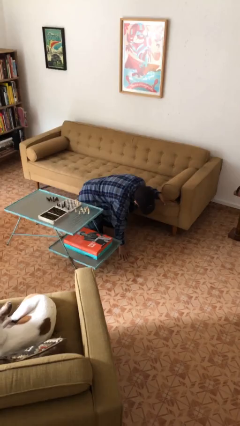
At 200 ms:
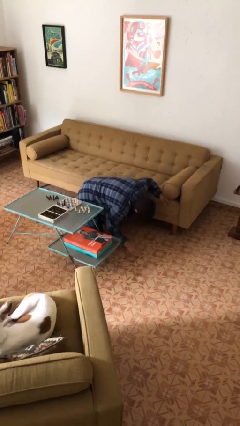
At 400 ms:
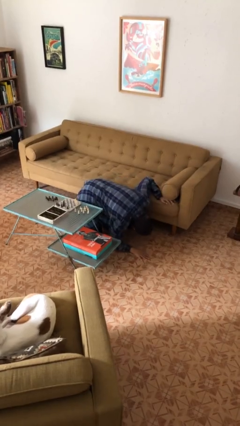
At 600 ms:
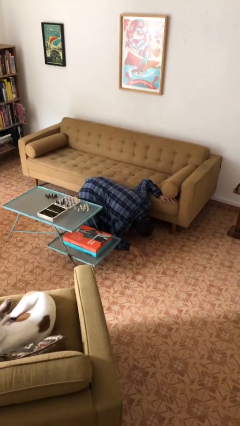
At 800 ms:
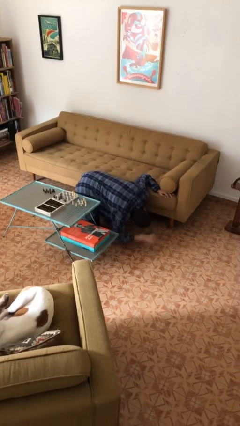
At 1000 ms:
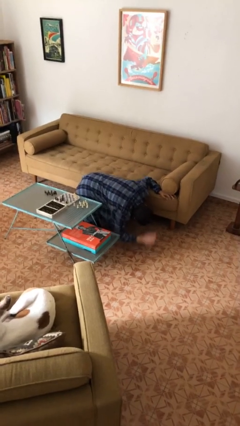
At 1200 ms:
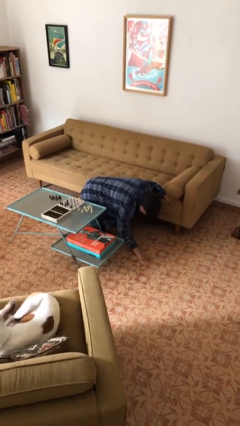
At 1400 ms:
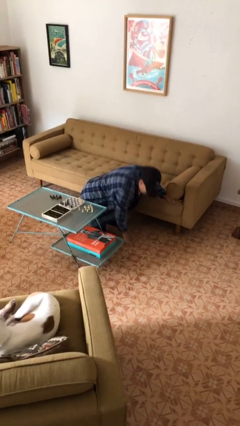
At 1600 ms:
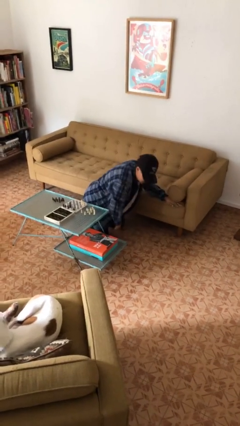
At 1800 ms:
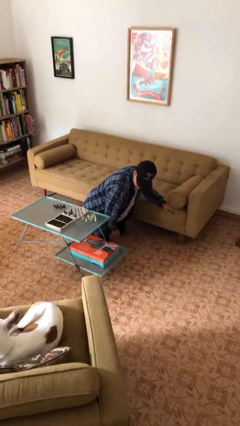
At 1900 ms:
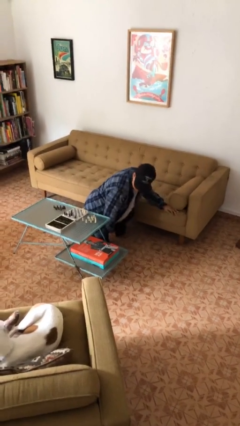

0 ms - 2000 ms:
person searches under couch

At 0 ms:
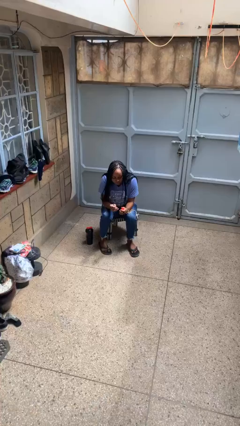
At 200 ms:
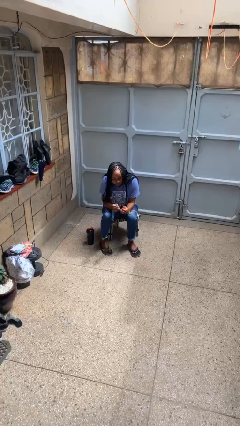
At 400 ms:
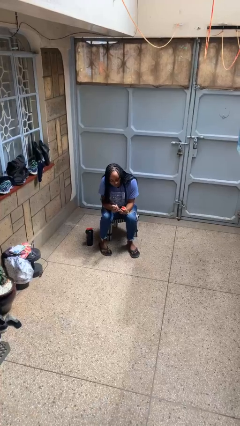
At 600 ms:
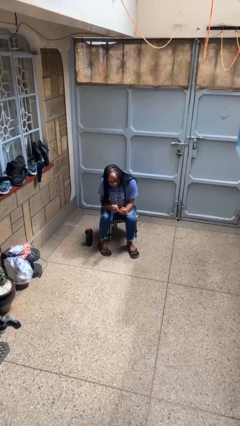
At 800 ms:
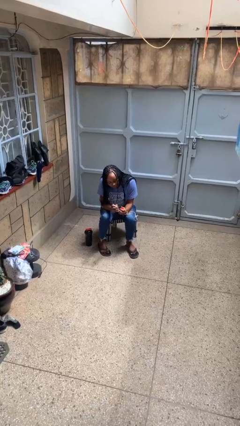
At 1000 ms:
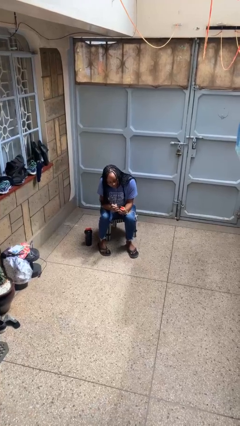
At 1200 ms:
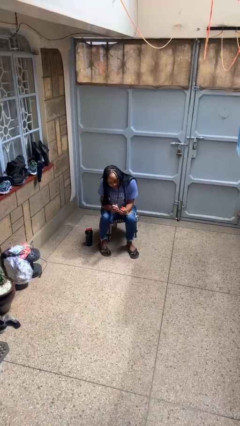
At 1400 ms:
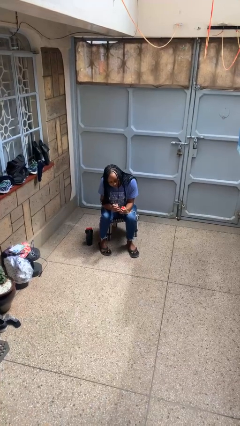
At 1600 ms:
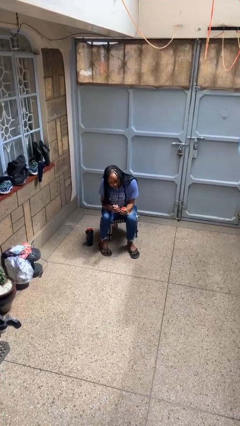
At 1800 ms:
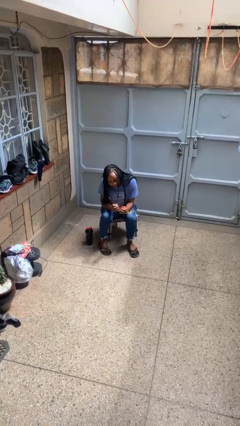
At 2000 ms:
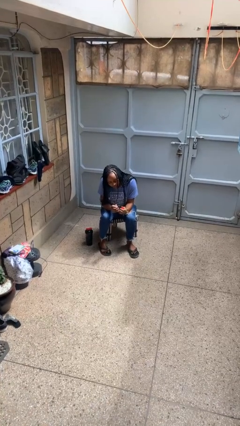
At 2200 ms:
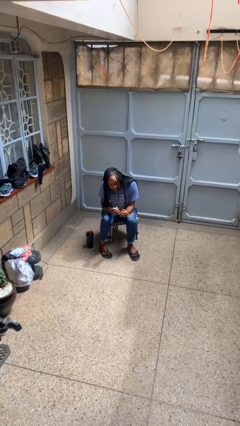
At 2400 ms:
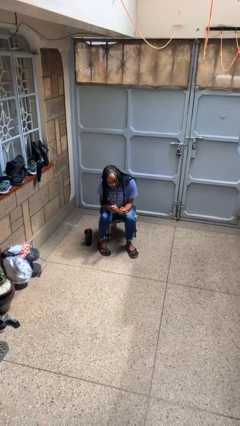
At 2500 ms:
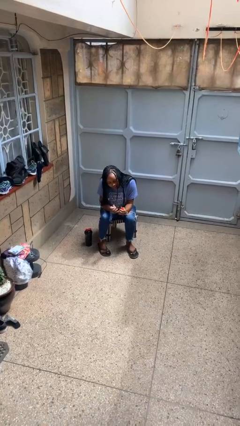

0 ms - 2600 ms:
person paints fingernails

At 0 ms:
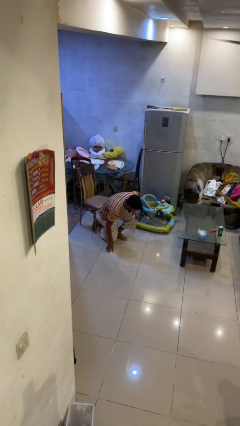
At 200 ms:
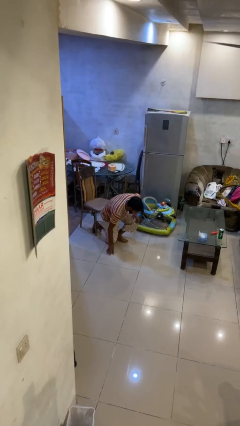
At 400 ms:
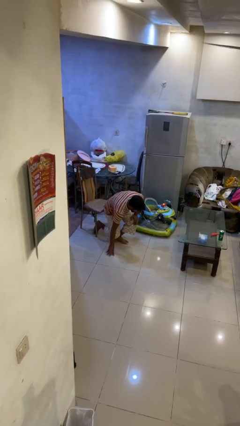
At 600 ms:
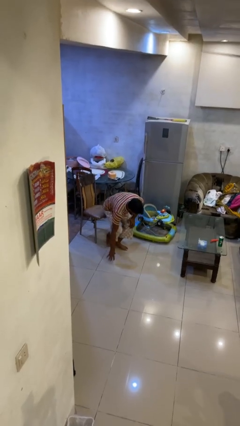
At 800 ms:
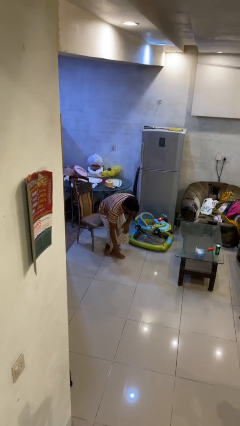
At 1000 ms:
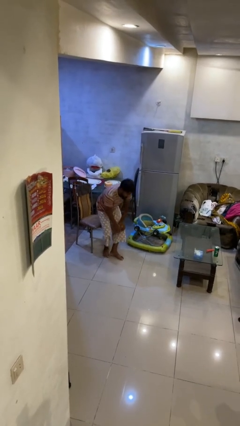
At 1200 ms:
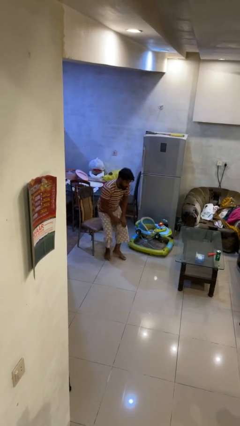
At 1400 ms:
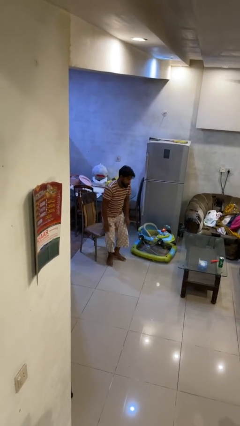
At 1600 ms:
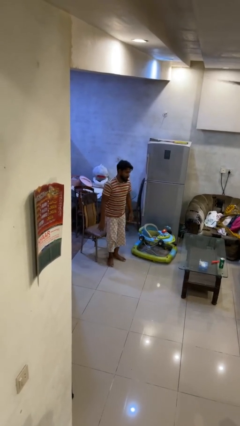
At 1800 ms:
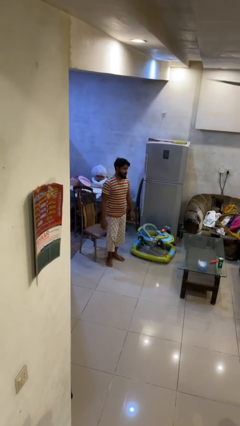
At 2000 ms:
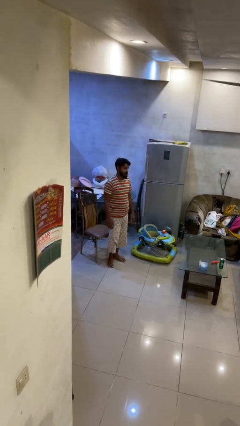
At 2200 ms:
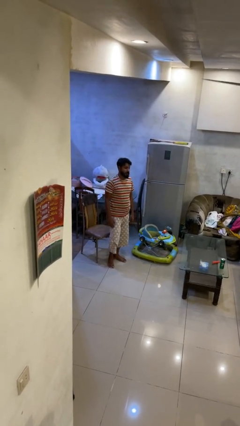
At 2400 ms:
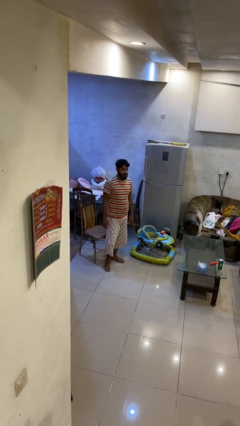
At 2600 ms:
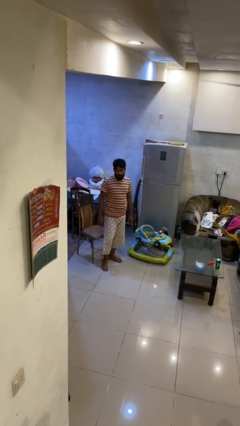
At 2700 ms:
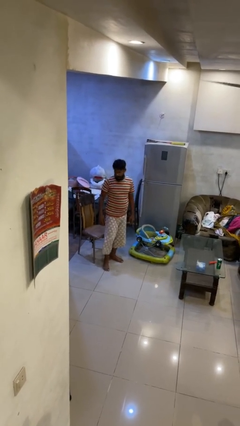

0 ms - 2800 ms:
person stands up from floor

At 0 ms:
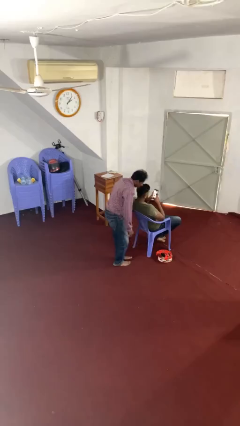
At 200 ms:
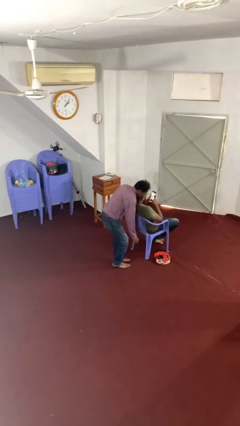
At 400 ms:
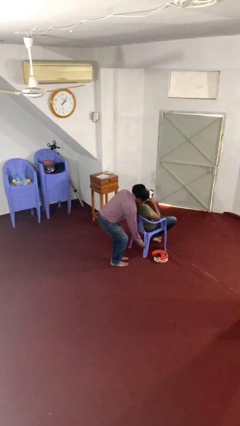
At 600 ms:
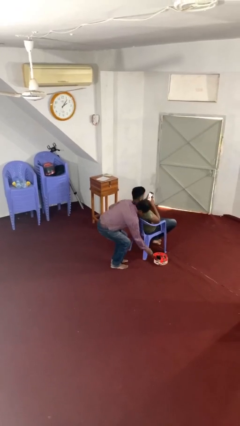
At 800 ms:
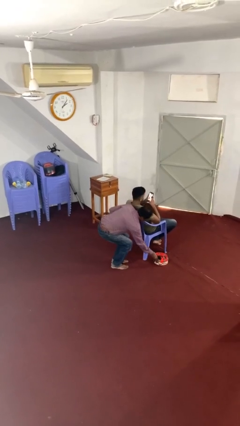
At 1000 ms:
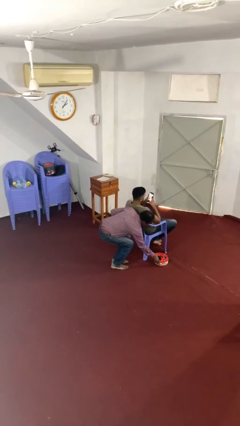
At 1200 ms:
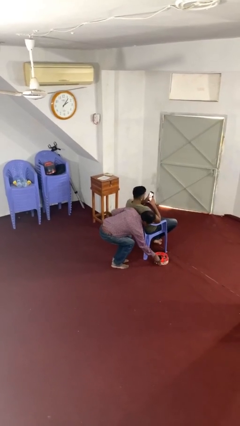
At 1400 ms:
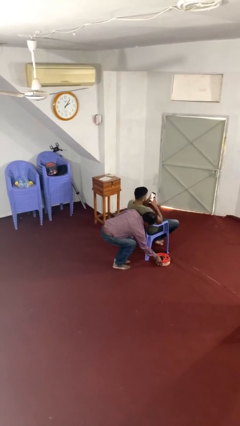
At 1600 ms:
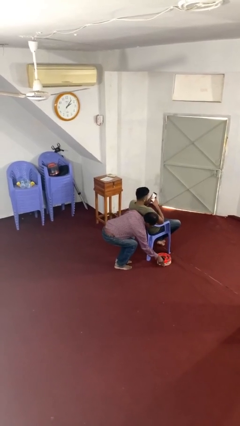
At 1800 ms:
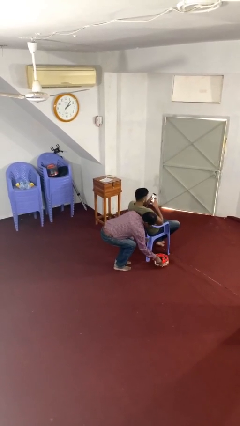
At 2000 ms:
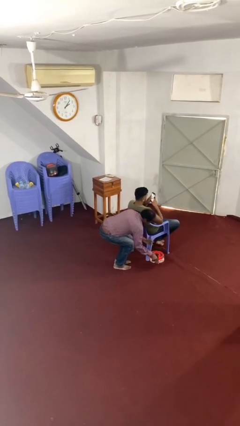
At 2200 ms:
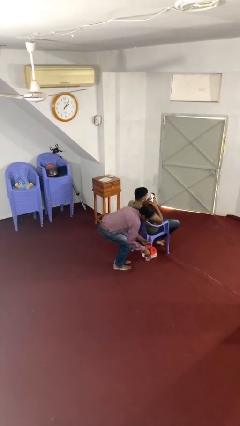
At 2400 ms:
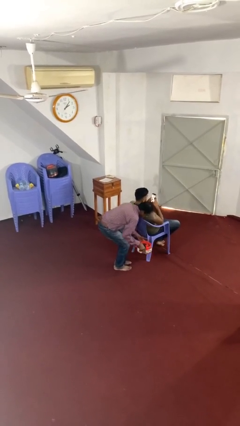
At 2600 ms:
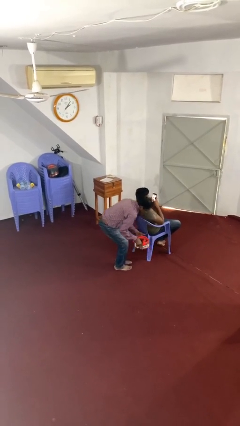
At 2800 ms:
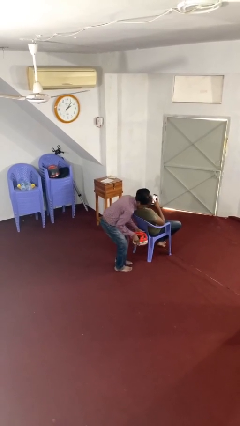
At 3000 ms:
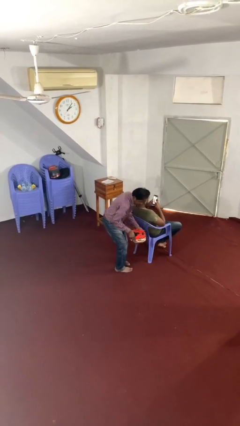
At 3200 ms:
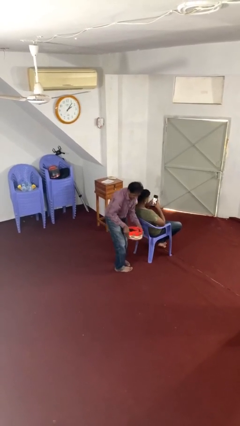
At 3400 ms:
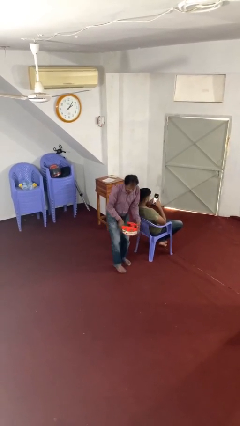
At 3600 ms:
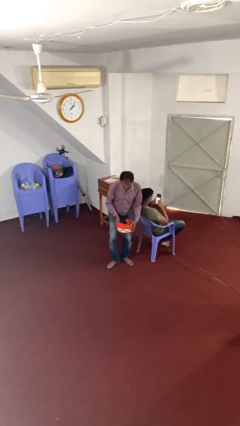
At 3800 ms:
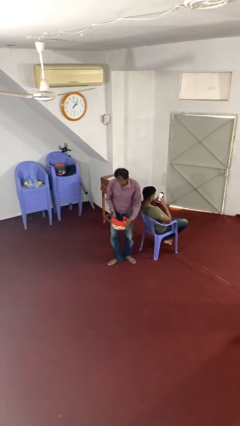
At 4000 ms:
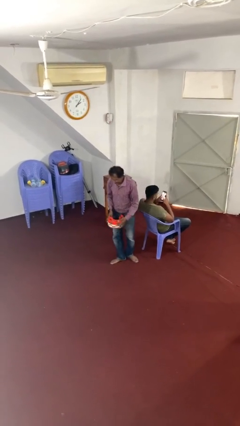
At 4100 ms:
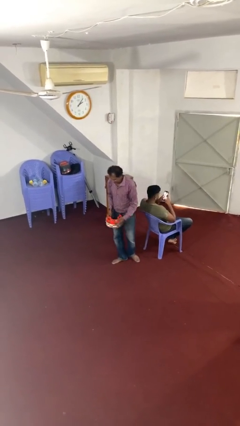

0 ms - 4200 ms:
person steals object from person

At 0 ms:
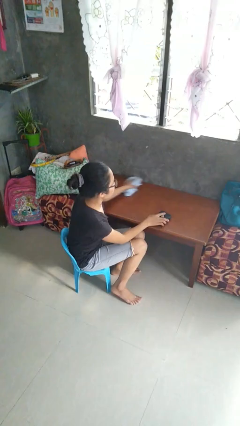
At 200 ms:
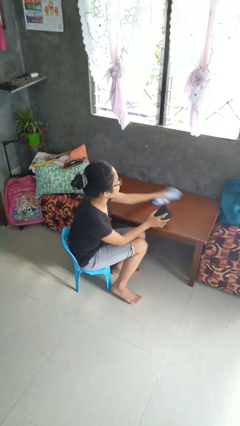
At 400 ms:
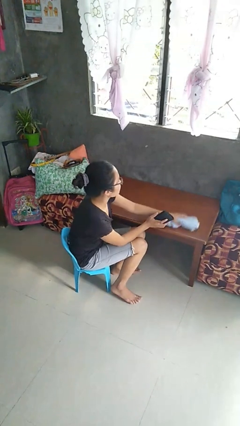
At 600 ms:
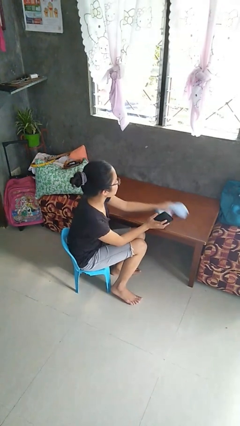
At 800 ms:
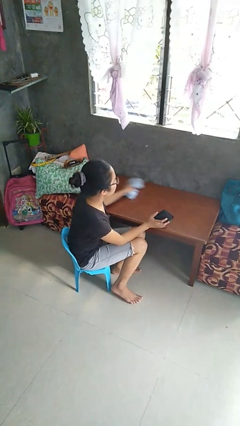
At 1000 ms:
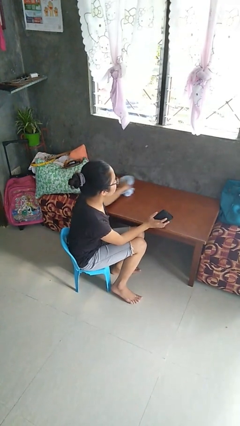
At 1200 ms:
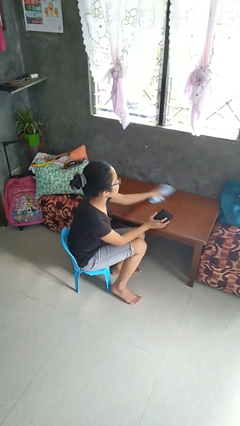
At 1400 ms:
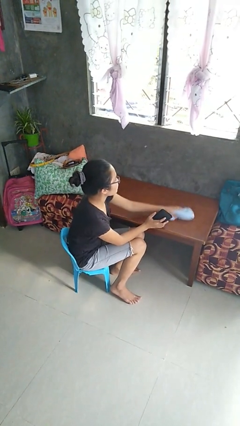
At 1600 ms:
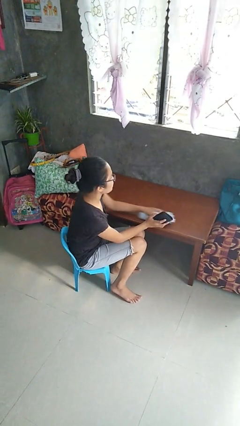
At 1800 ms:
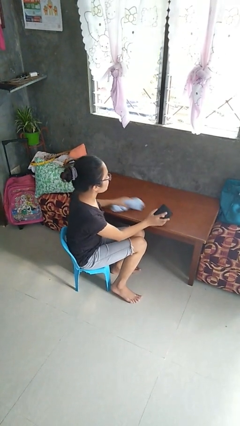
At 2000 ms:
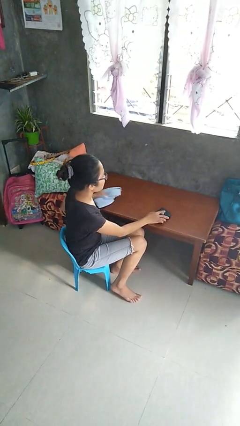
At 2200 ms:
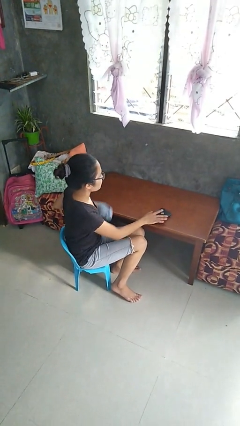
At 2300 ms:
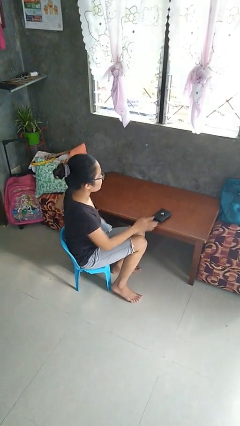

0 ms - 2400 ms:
person cleans table with rag

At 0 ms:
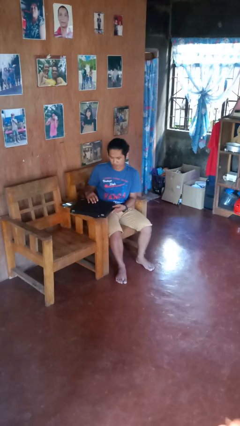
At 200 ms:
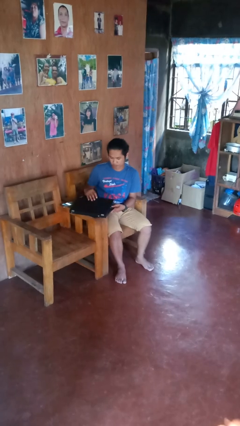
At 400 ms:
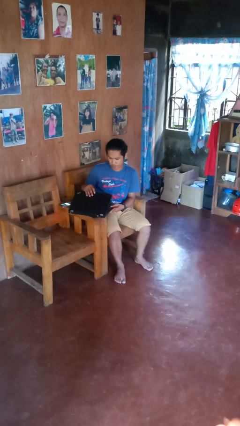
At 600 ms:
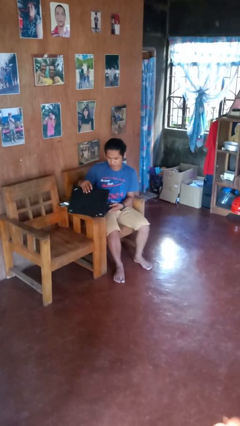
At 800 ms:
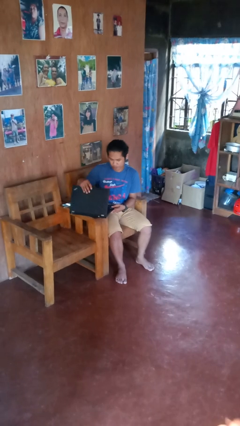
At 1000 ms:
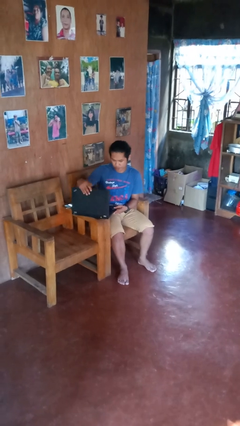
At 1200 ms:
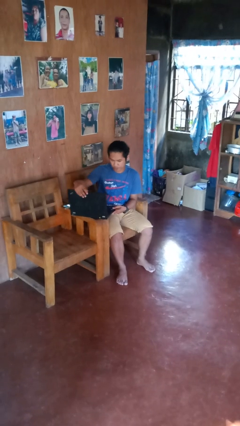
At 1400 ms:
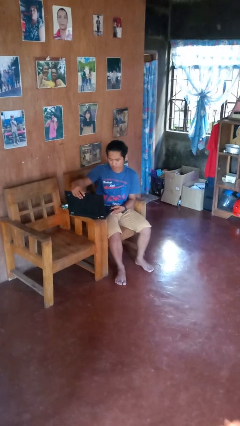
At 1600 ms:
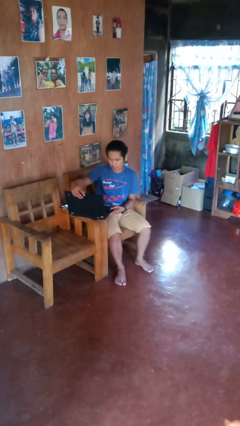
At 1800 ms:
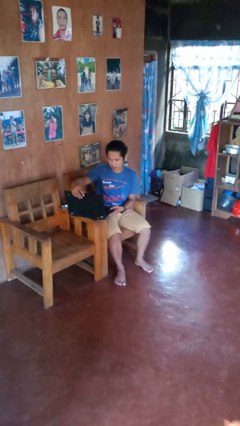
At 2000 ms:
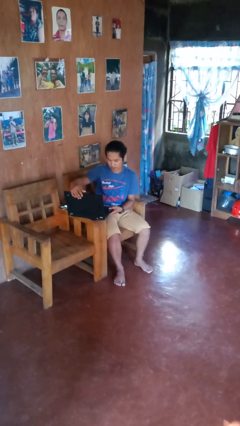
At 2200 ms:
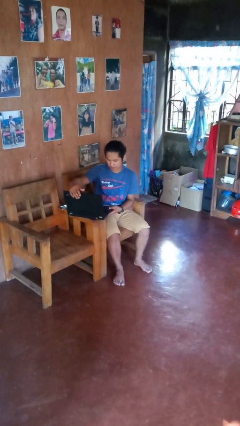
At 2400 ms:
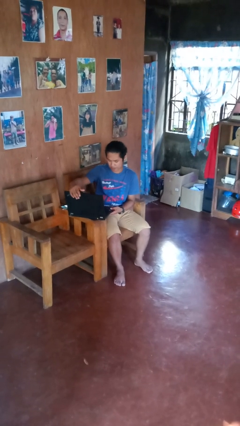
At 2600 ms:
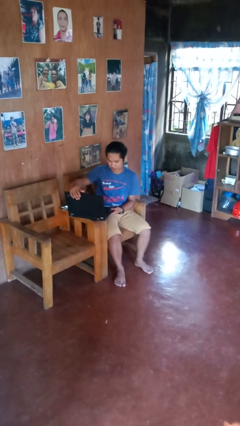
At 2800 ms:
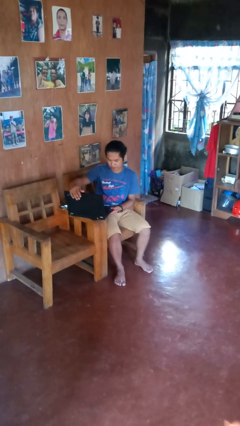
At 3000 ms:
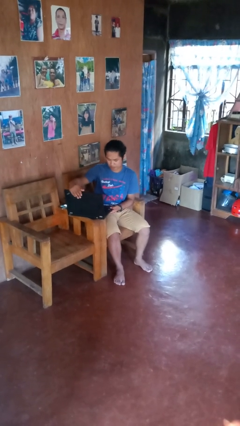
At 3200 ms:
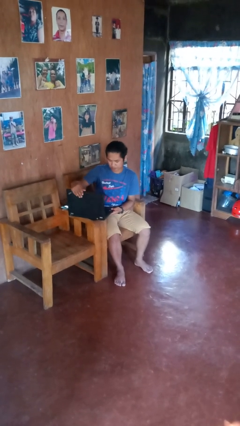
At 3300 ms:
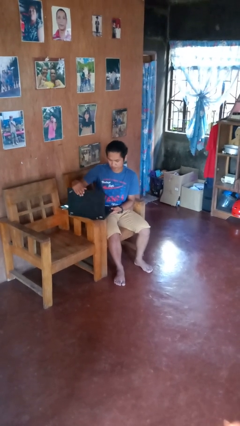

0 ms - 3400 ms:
person opens laptop
